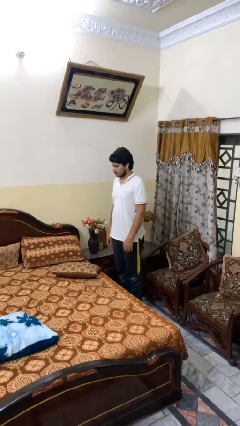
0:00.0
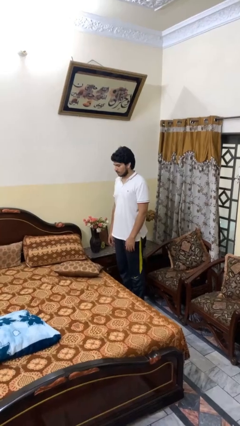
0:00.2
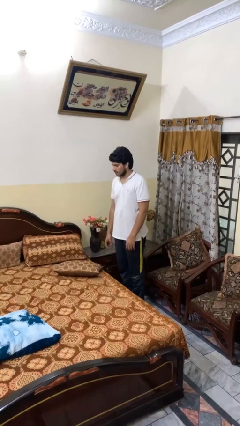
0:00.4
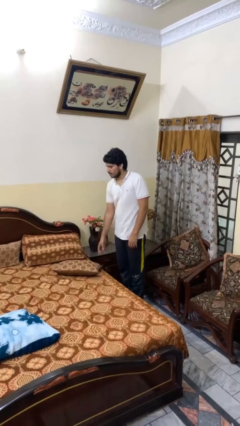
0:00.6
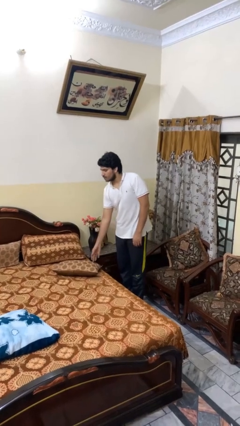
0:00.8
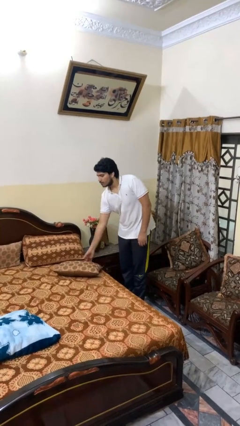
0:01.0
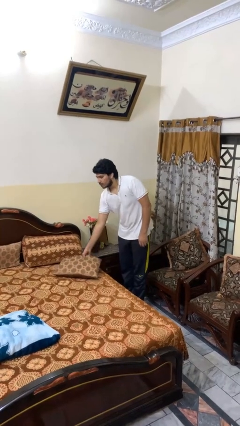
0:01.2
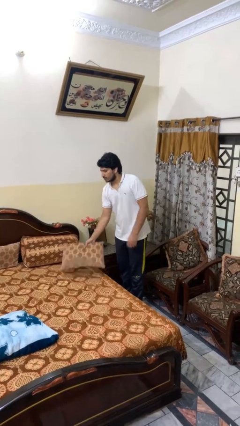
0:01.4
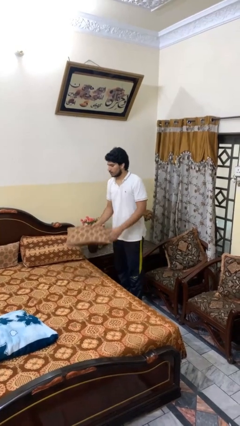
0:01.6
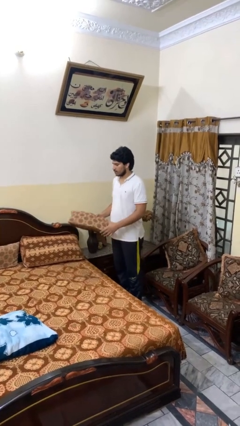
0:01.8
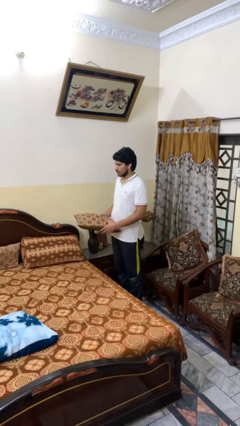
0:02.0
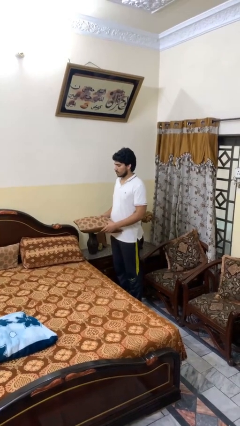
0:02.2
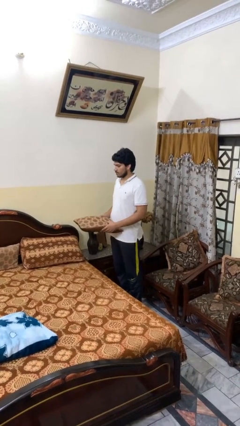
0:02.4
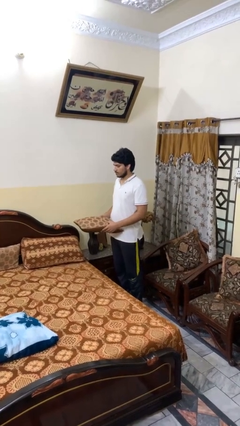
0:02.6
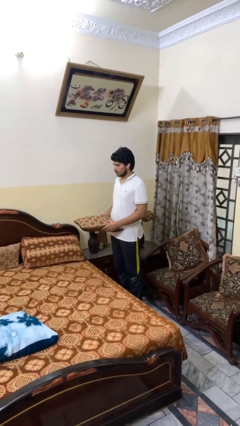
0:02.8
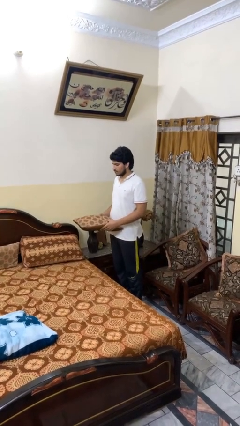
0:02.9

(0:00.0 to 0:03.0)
person picks up object from bed

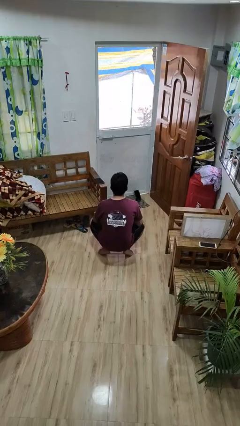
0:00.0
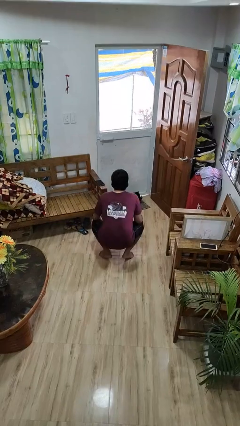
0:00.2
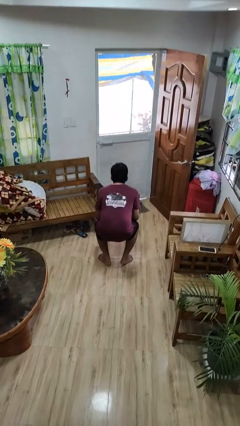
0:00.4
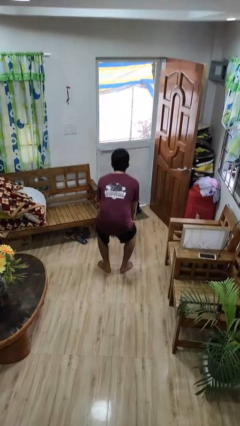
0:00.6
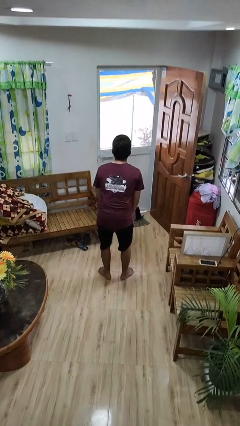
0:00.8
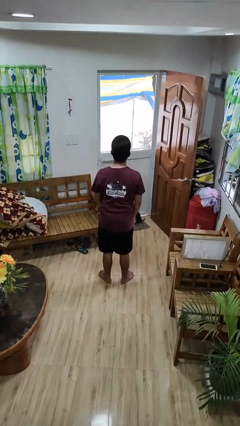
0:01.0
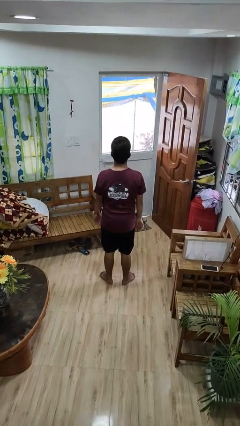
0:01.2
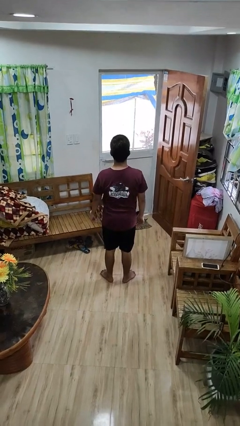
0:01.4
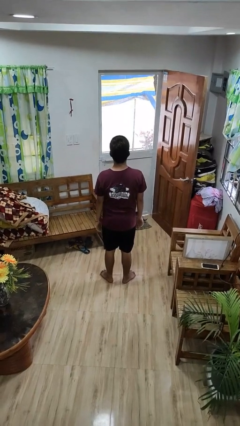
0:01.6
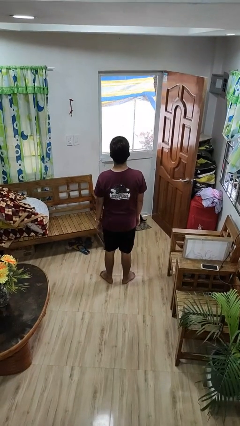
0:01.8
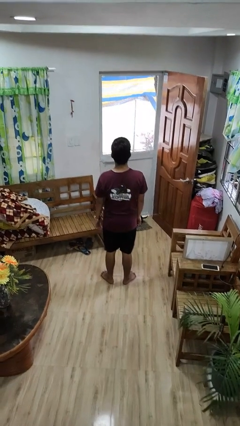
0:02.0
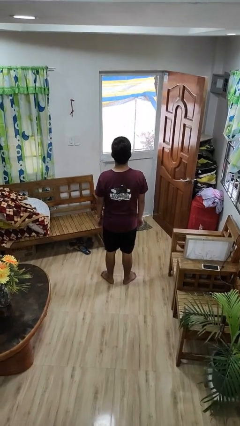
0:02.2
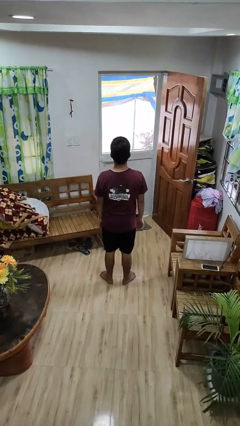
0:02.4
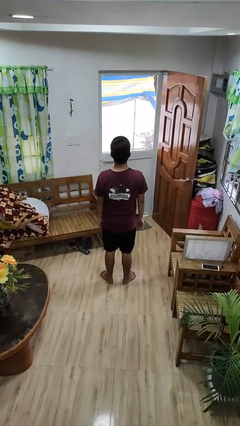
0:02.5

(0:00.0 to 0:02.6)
person stands up

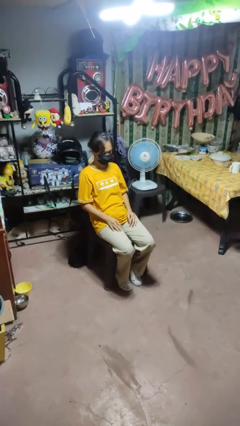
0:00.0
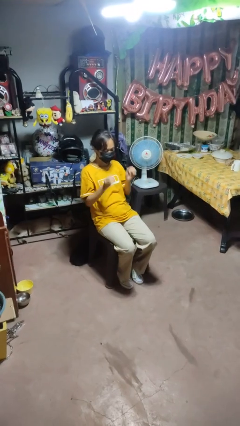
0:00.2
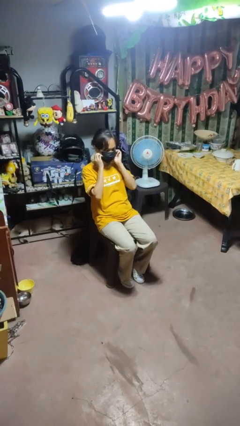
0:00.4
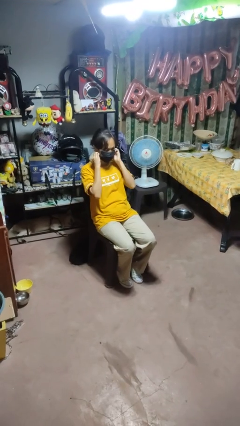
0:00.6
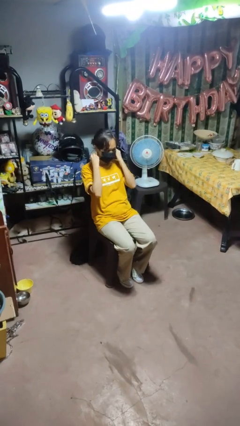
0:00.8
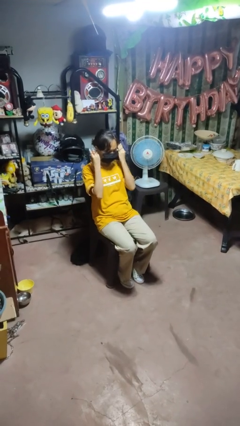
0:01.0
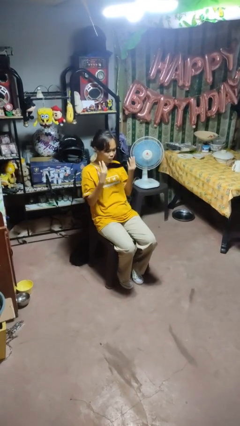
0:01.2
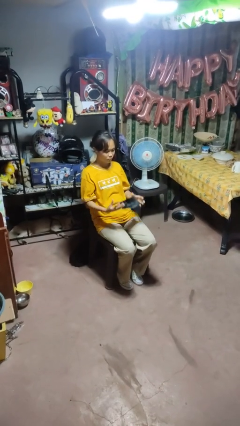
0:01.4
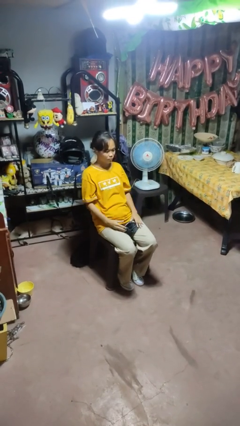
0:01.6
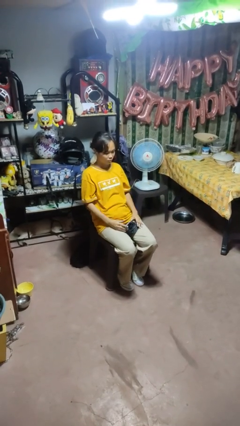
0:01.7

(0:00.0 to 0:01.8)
person takes off facemask

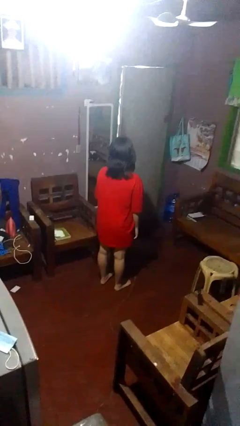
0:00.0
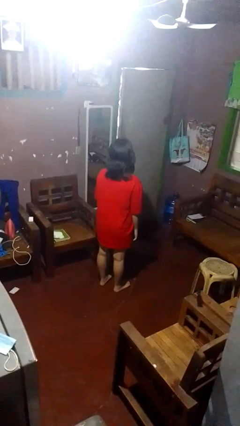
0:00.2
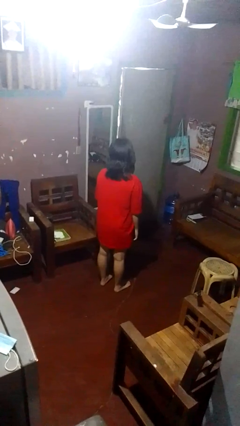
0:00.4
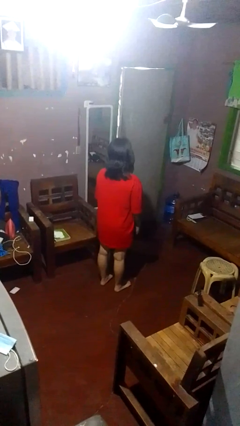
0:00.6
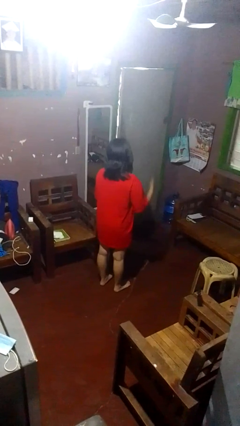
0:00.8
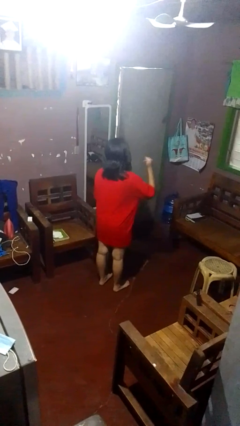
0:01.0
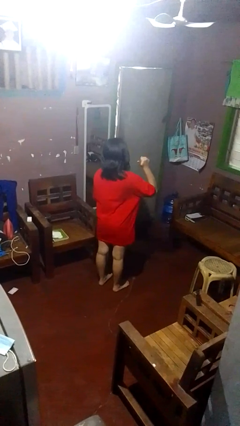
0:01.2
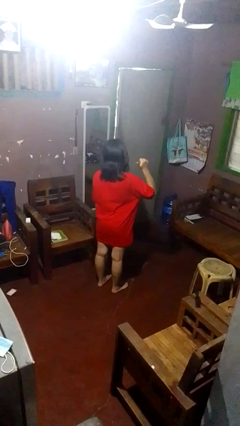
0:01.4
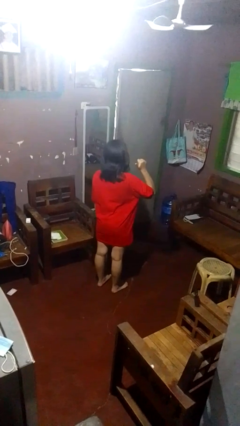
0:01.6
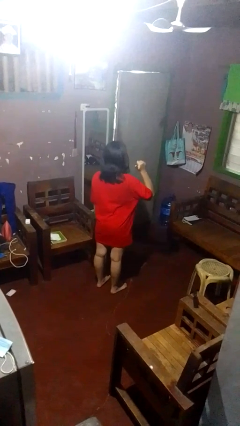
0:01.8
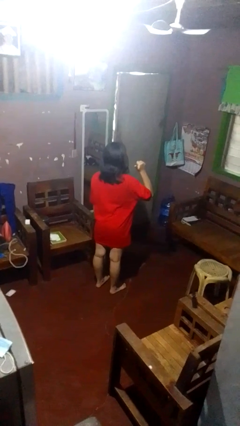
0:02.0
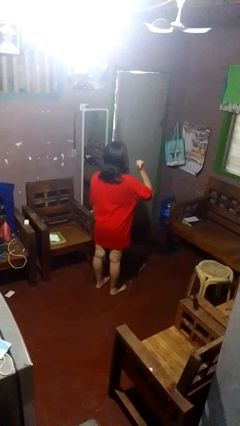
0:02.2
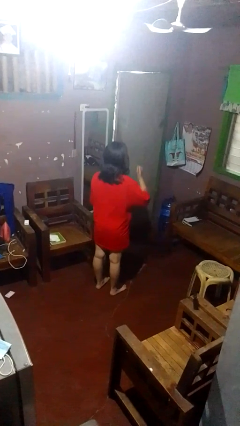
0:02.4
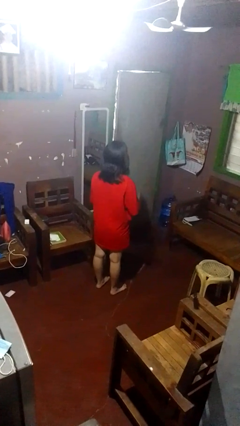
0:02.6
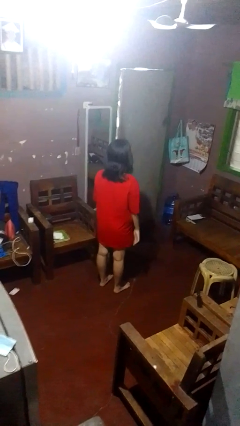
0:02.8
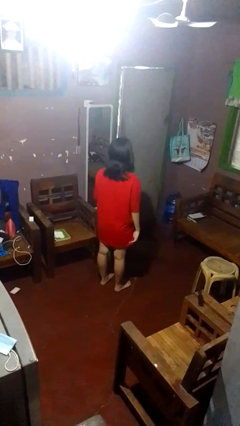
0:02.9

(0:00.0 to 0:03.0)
person gestures behind me

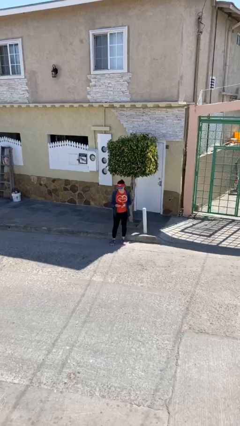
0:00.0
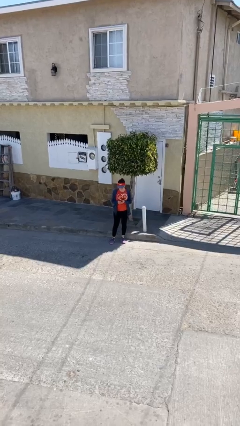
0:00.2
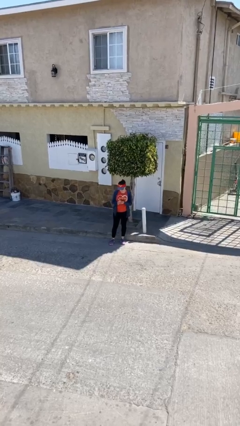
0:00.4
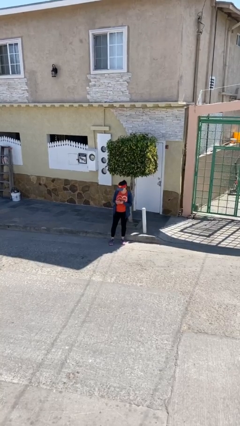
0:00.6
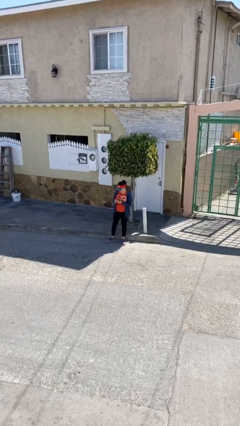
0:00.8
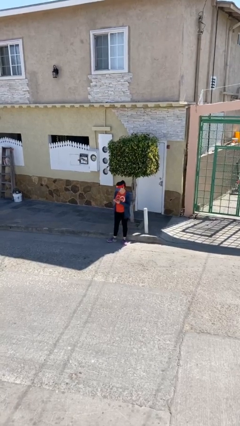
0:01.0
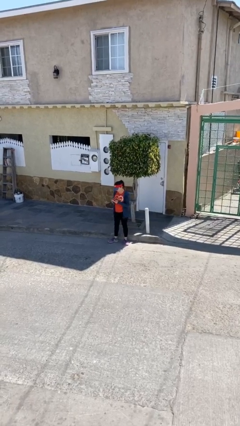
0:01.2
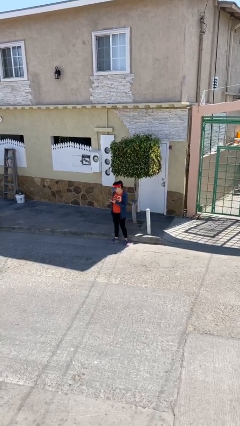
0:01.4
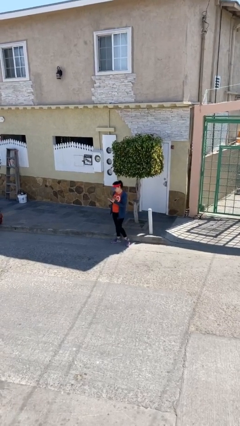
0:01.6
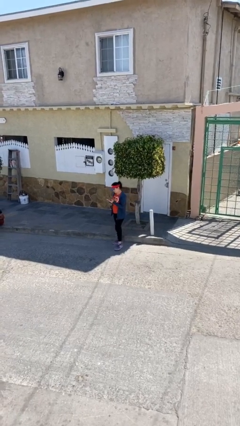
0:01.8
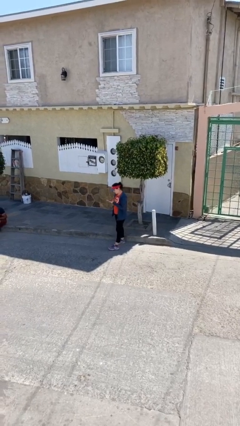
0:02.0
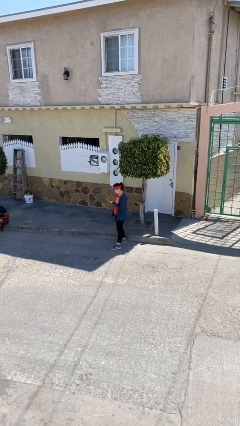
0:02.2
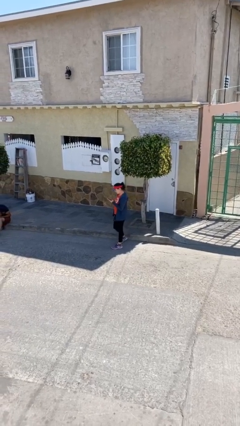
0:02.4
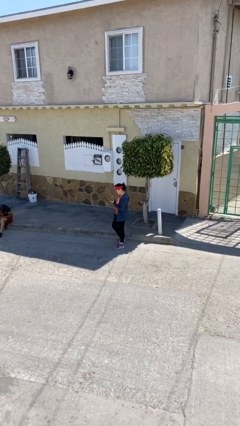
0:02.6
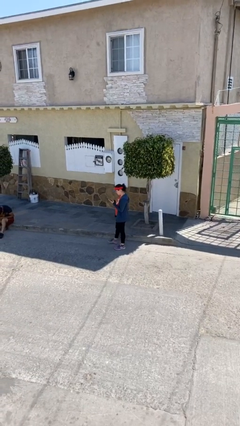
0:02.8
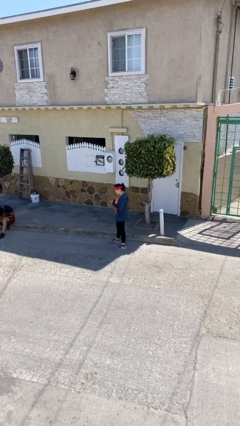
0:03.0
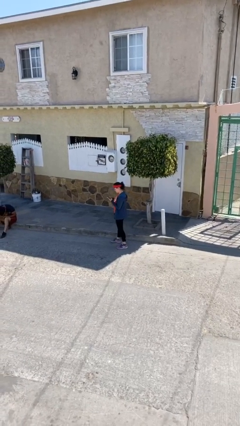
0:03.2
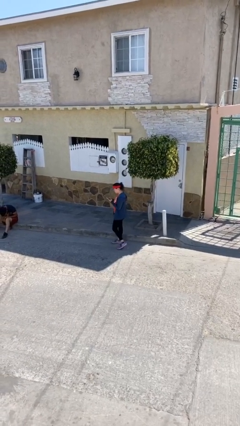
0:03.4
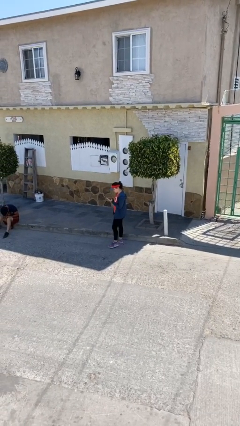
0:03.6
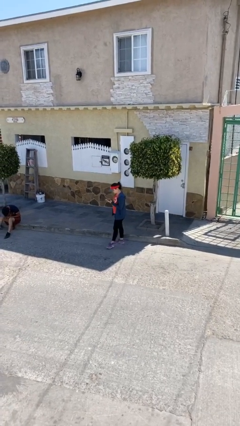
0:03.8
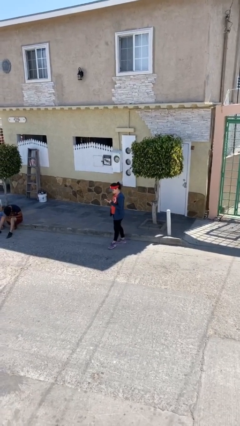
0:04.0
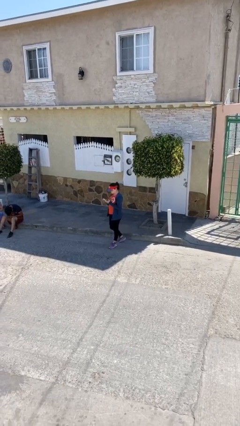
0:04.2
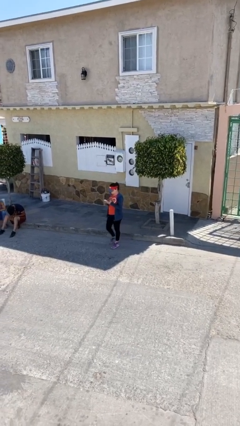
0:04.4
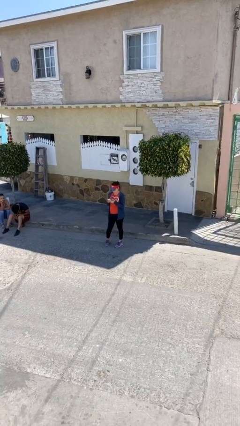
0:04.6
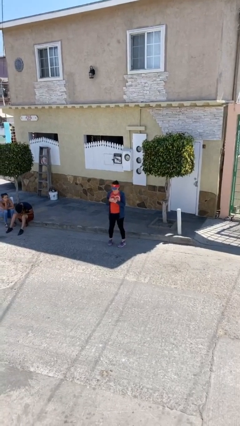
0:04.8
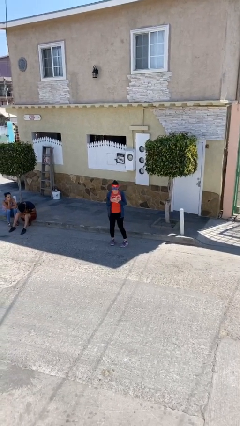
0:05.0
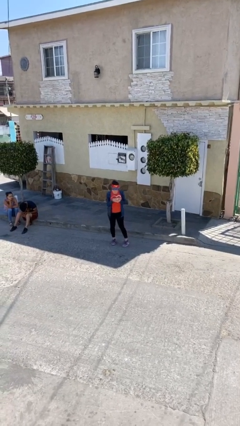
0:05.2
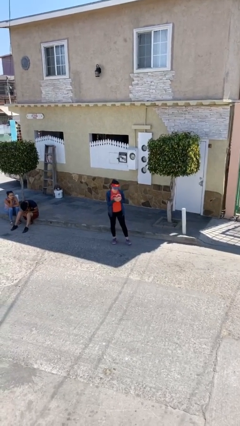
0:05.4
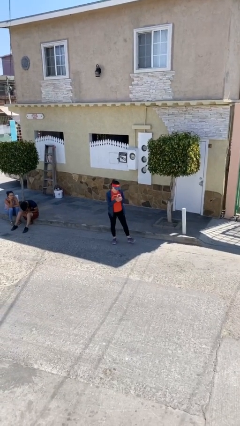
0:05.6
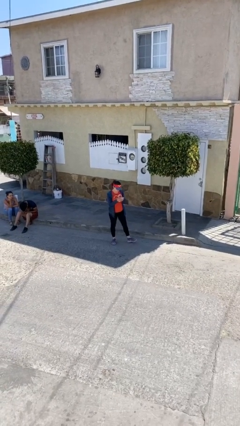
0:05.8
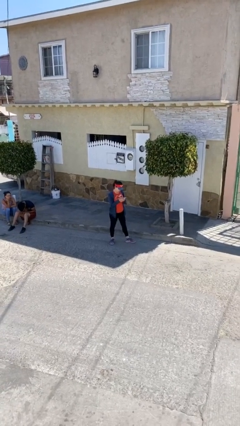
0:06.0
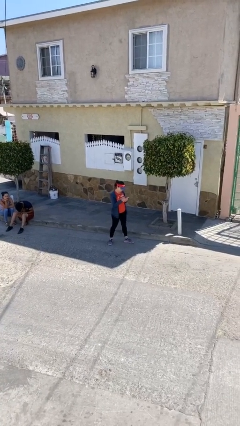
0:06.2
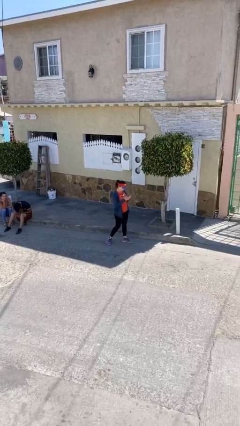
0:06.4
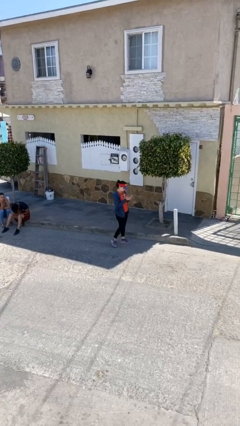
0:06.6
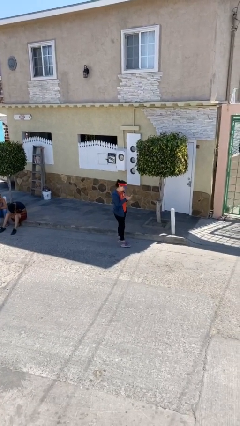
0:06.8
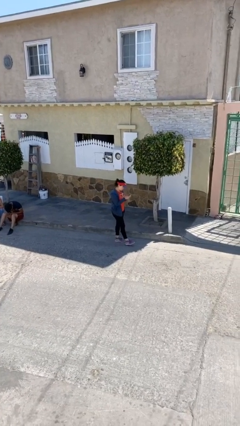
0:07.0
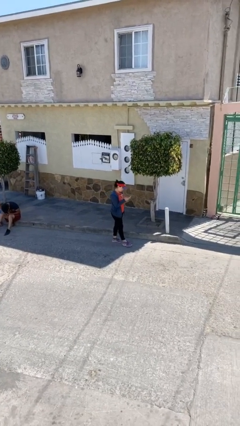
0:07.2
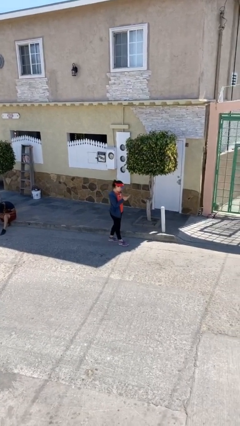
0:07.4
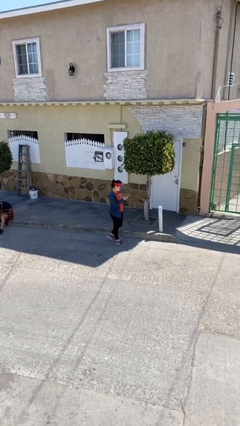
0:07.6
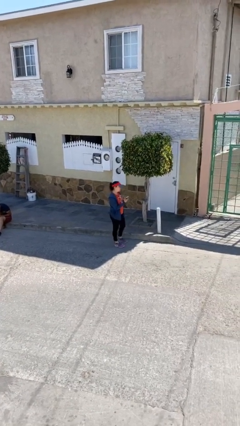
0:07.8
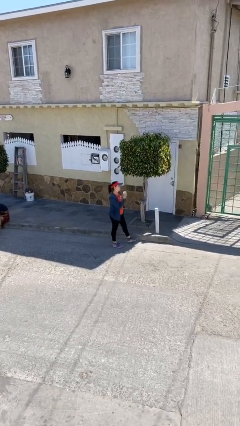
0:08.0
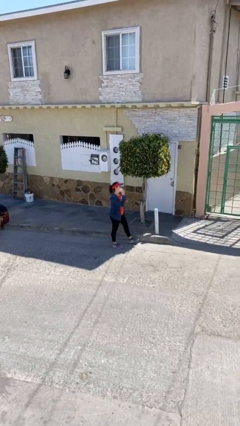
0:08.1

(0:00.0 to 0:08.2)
person texts on phone
